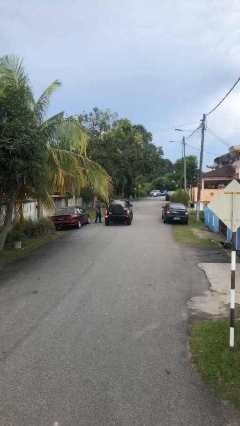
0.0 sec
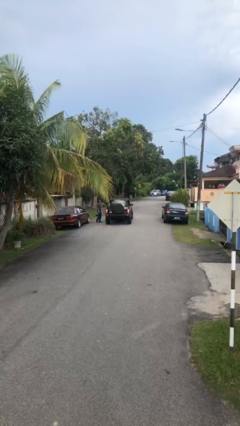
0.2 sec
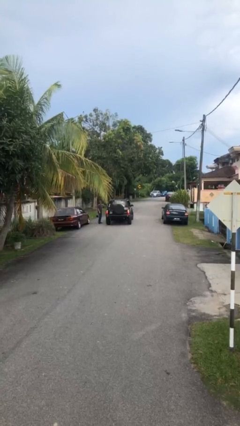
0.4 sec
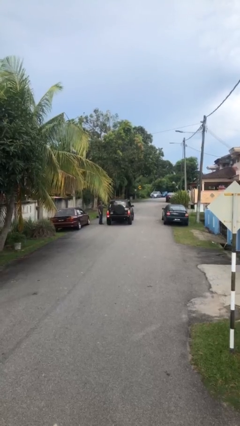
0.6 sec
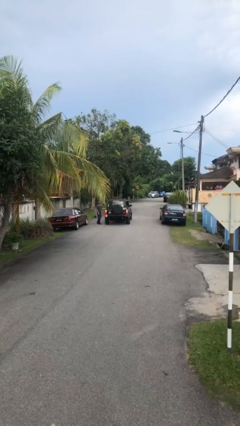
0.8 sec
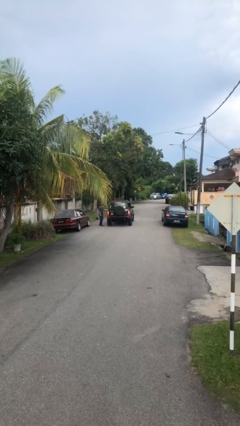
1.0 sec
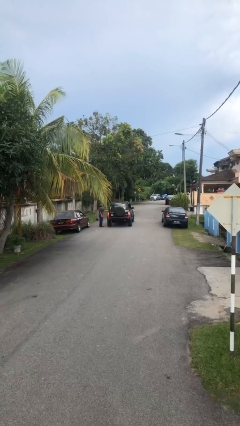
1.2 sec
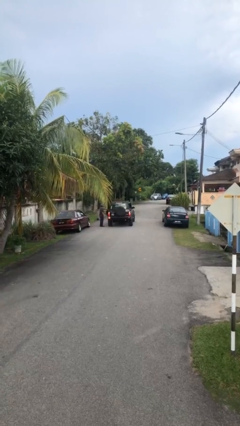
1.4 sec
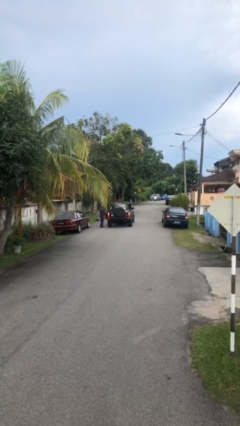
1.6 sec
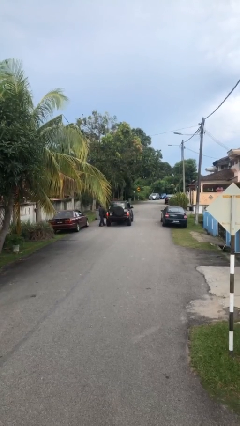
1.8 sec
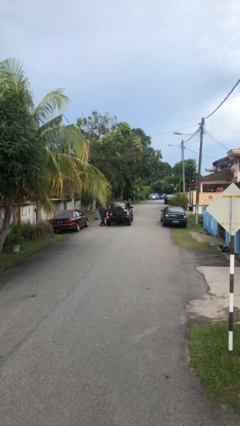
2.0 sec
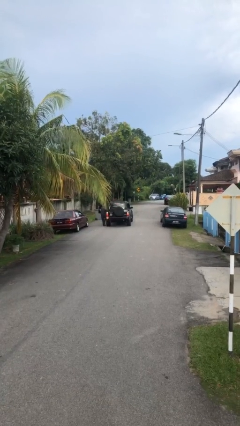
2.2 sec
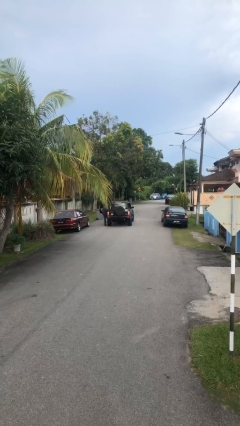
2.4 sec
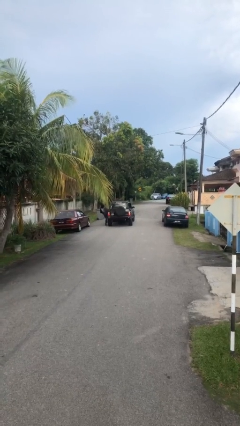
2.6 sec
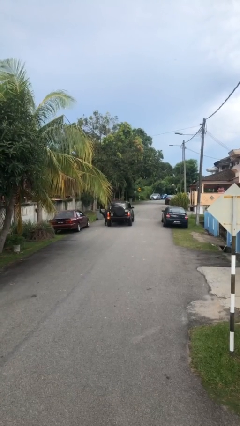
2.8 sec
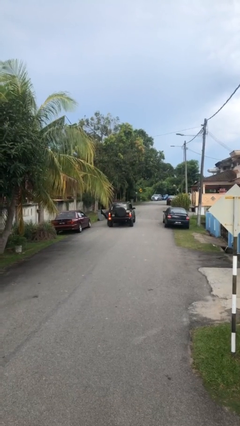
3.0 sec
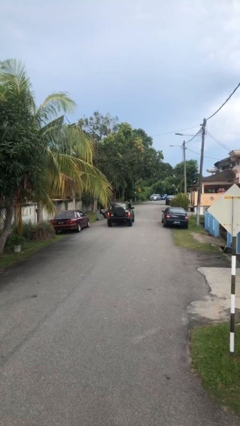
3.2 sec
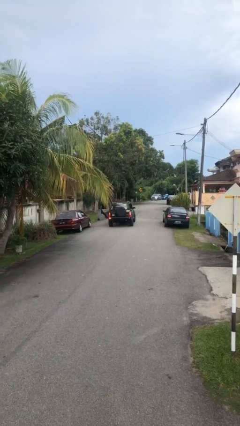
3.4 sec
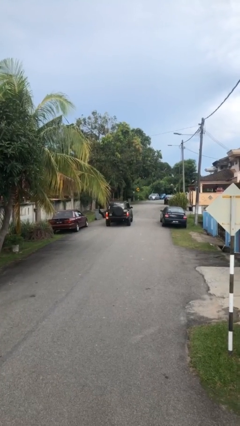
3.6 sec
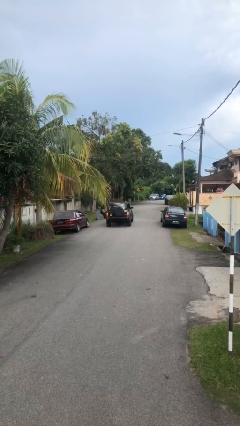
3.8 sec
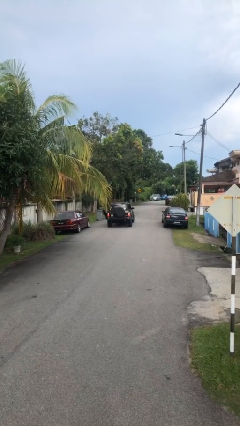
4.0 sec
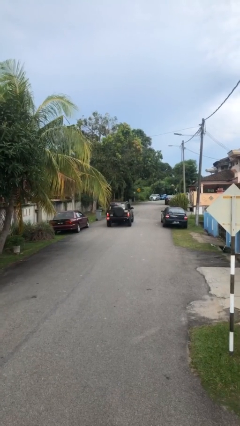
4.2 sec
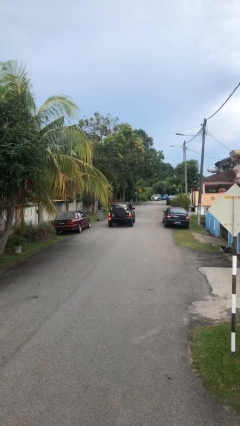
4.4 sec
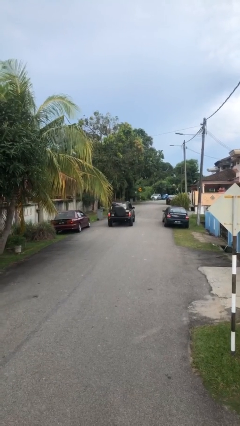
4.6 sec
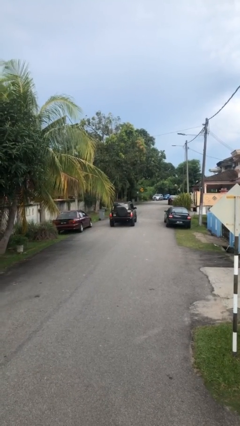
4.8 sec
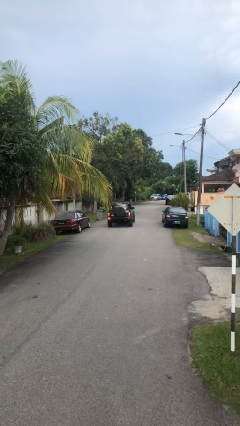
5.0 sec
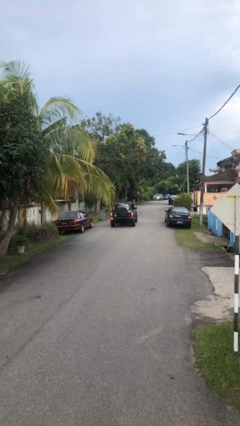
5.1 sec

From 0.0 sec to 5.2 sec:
car picks up person

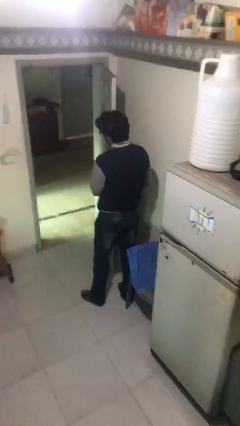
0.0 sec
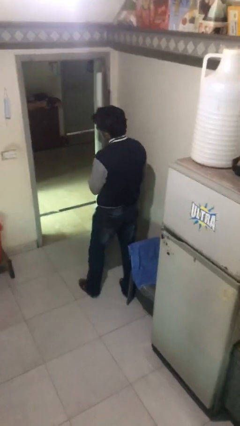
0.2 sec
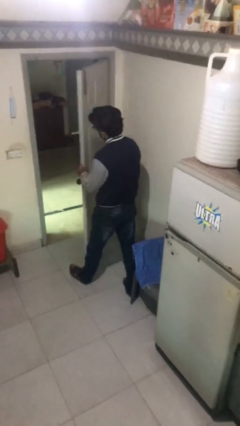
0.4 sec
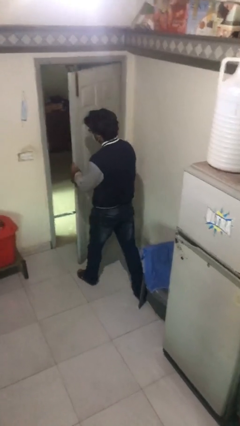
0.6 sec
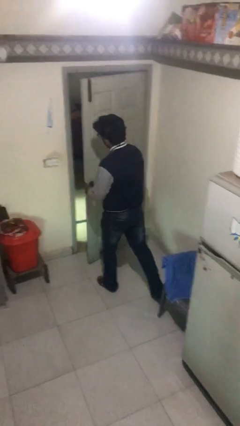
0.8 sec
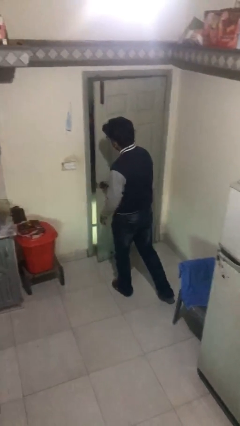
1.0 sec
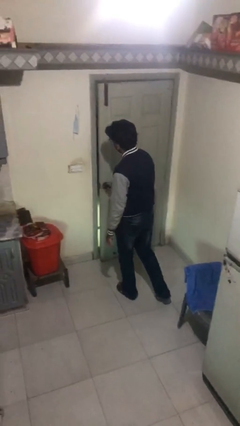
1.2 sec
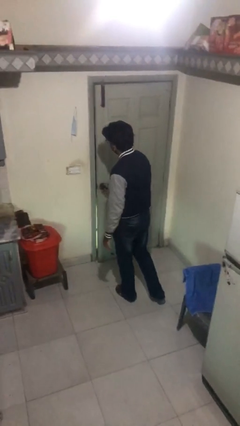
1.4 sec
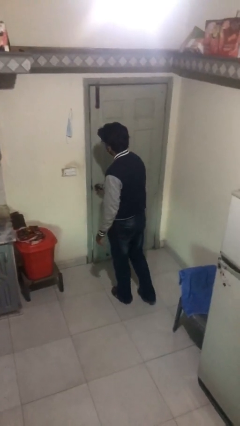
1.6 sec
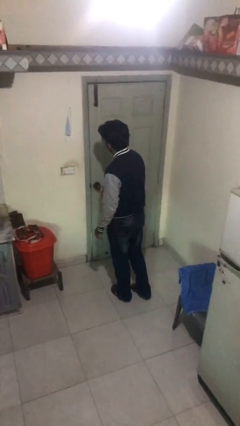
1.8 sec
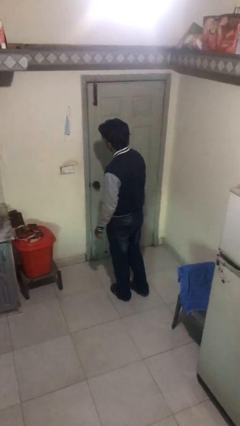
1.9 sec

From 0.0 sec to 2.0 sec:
person closes facility door

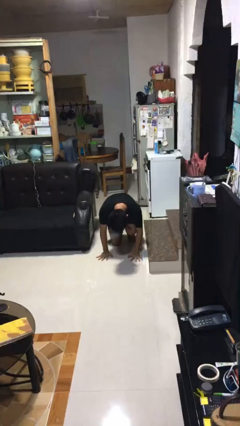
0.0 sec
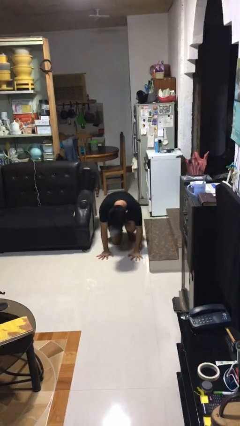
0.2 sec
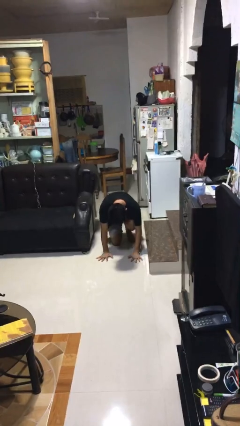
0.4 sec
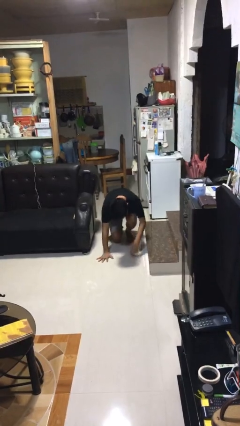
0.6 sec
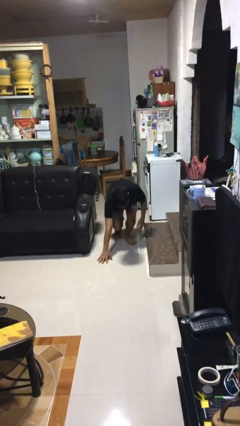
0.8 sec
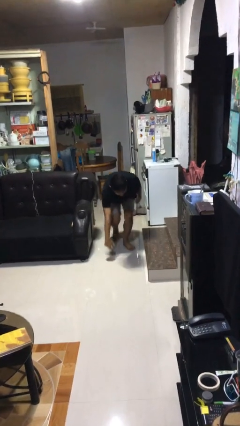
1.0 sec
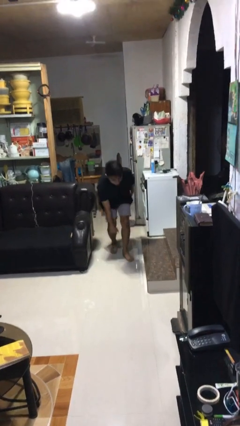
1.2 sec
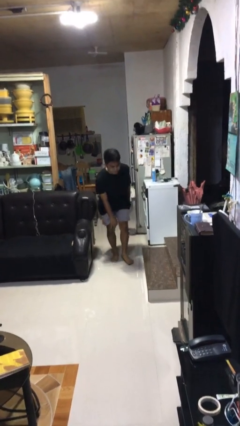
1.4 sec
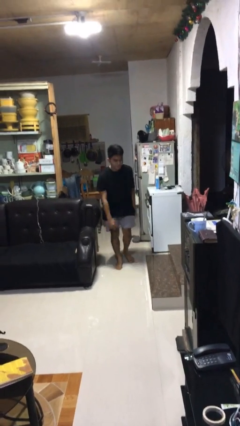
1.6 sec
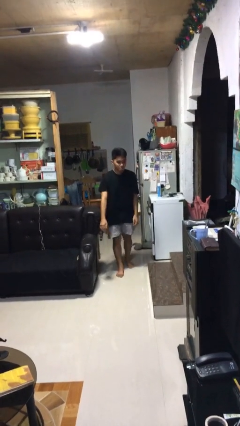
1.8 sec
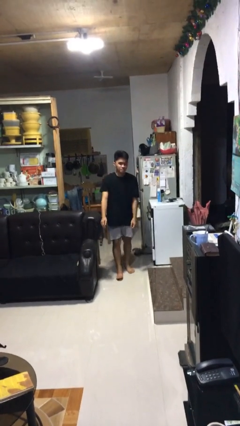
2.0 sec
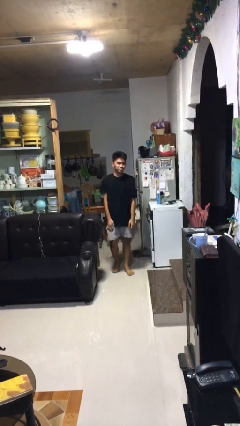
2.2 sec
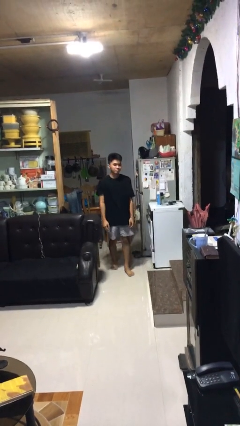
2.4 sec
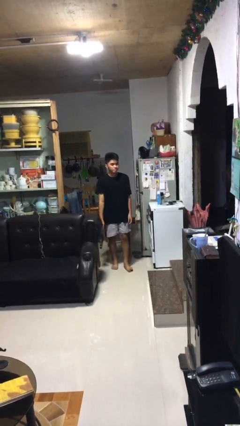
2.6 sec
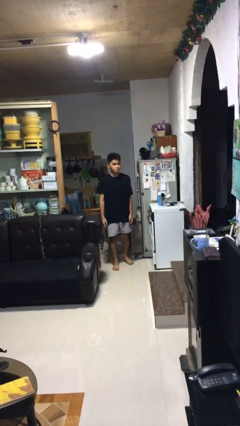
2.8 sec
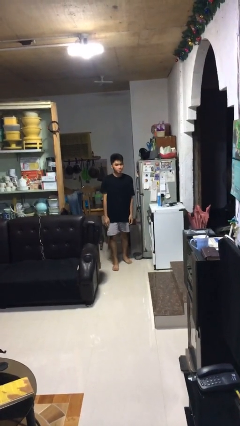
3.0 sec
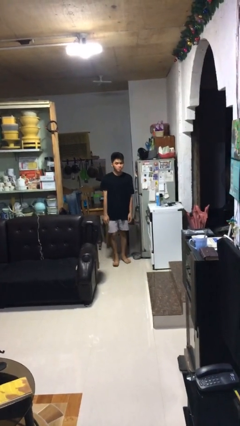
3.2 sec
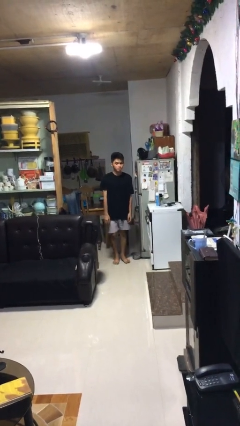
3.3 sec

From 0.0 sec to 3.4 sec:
person stands up from floor

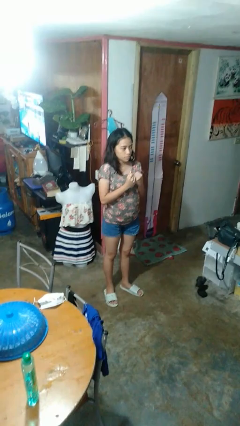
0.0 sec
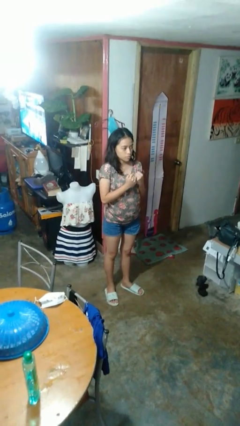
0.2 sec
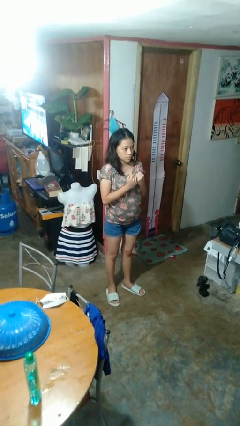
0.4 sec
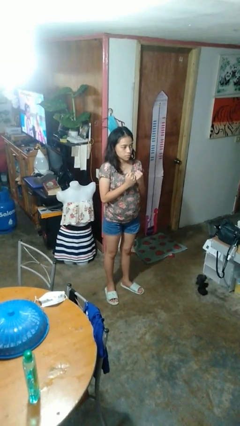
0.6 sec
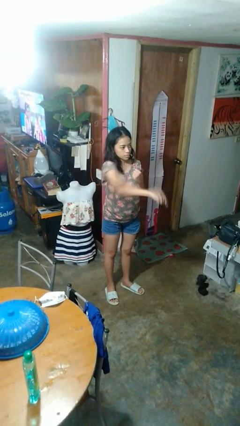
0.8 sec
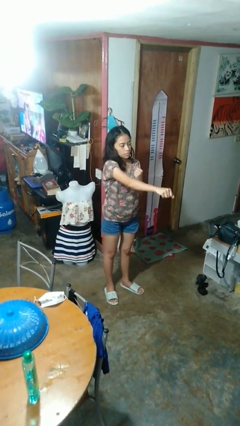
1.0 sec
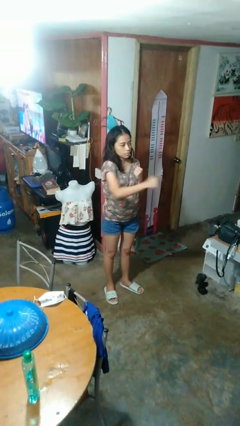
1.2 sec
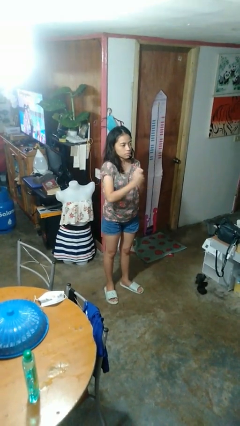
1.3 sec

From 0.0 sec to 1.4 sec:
person punches

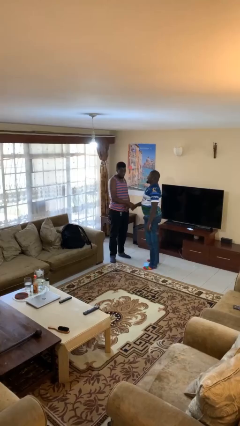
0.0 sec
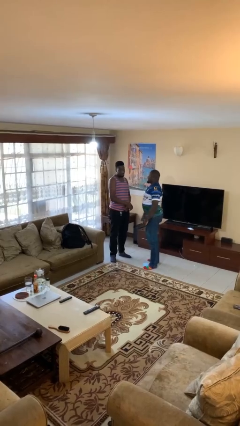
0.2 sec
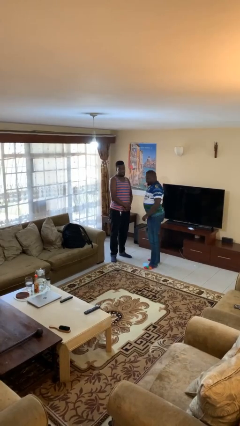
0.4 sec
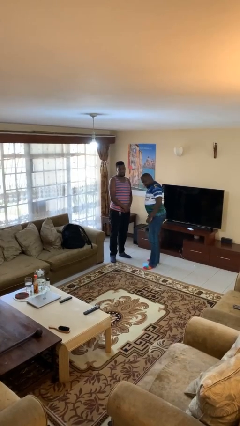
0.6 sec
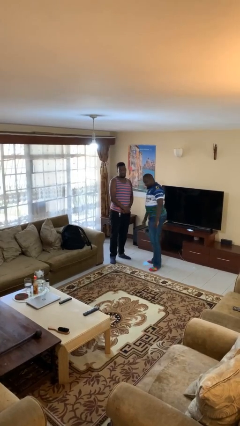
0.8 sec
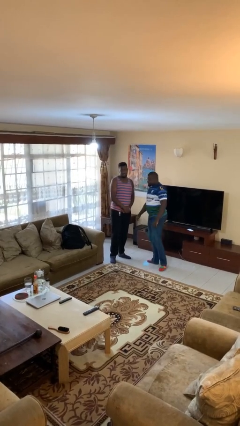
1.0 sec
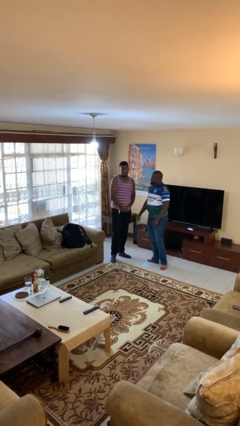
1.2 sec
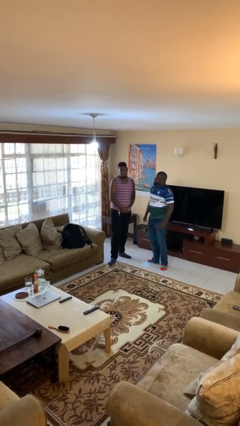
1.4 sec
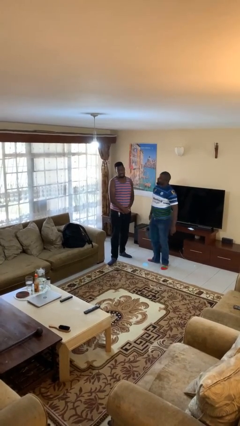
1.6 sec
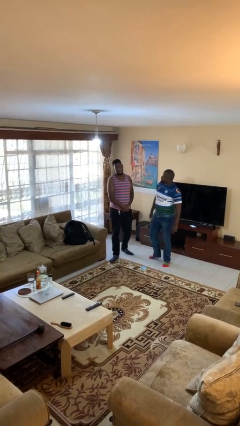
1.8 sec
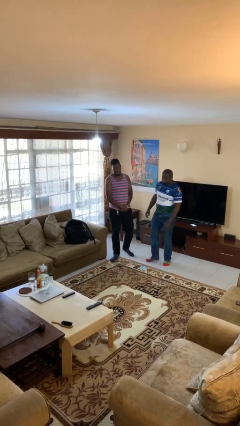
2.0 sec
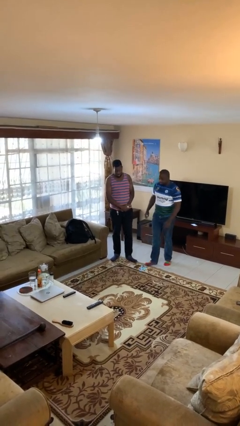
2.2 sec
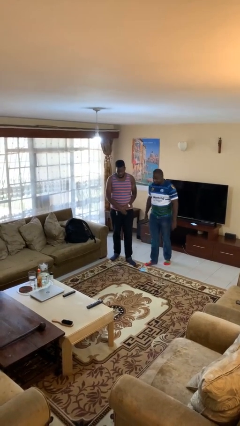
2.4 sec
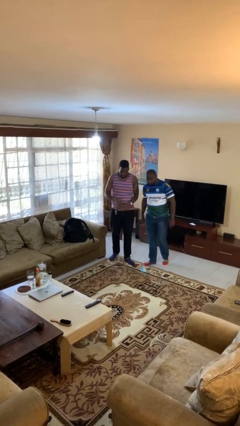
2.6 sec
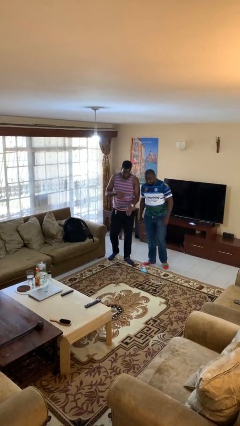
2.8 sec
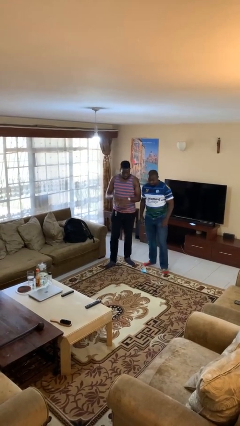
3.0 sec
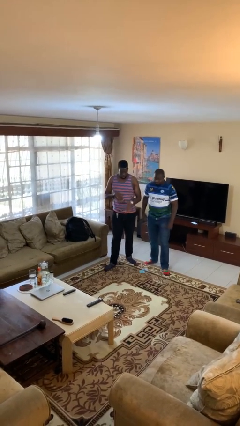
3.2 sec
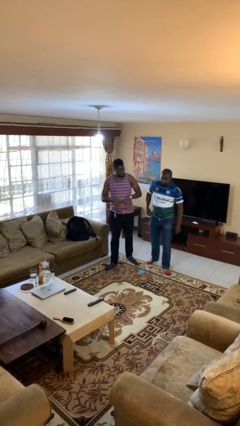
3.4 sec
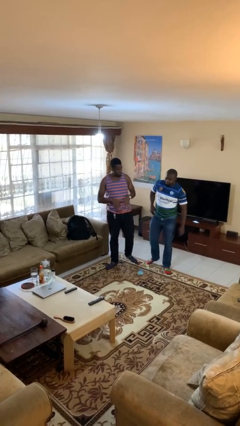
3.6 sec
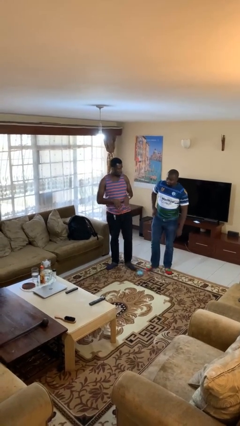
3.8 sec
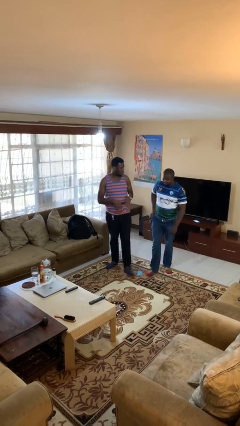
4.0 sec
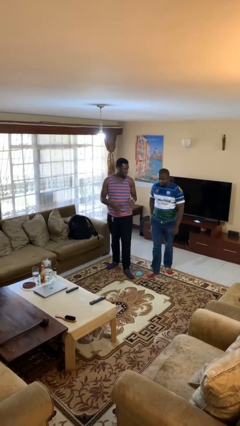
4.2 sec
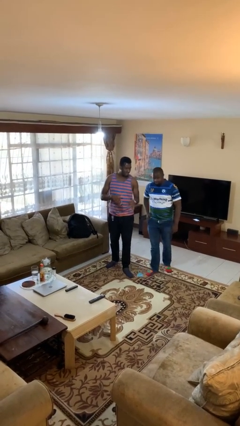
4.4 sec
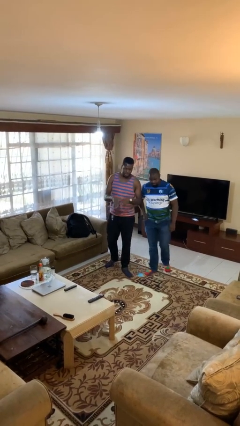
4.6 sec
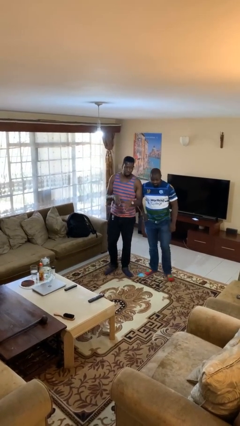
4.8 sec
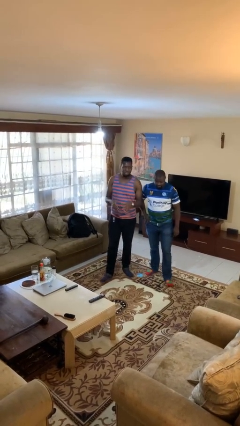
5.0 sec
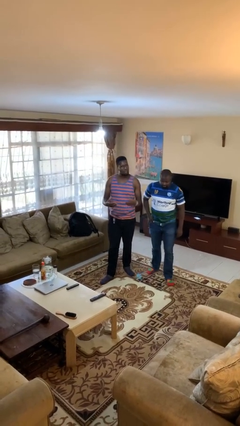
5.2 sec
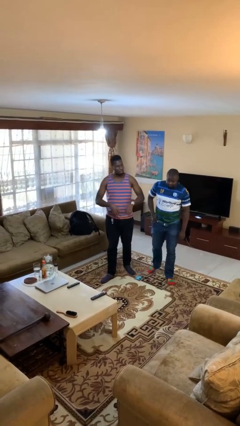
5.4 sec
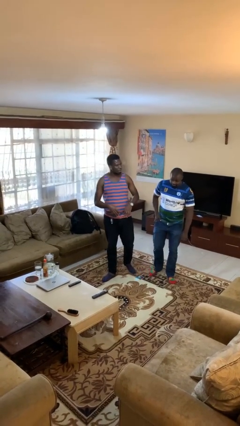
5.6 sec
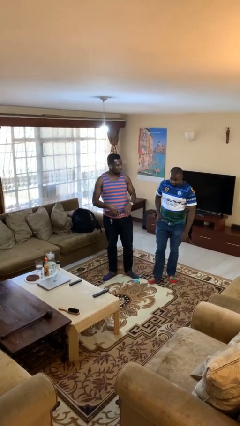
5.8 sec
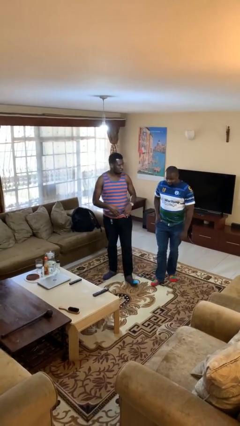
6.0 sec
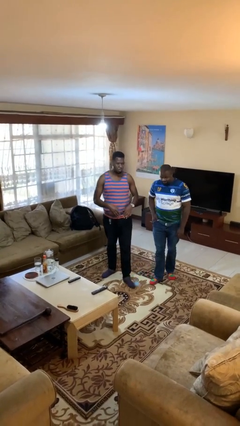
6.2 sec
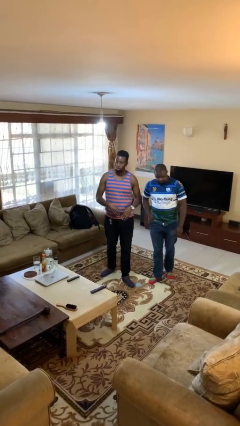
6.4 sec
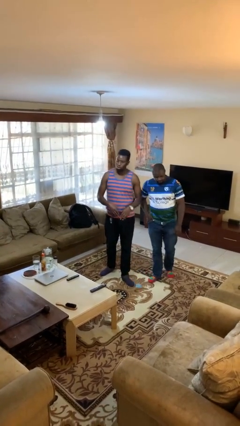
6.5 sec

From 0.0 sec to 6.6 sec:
person talks to person
